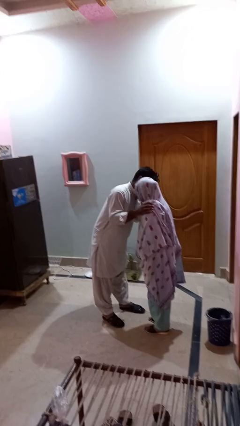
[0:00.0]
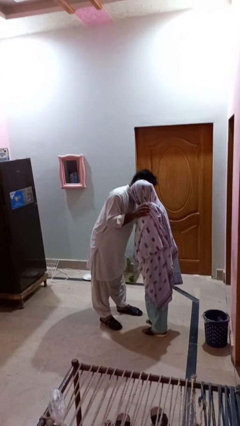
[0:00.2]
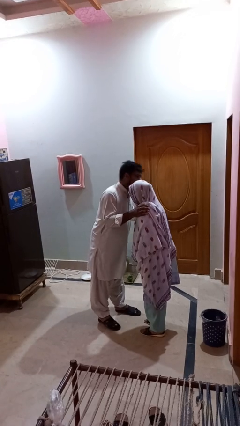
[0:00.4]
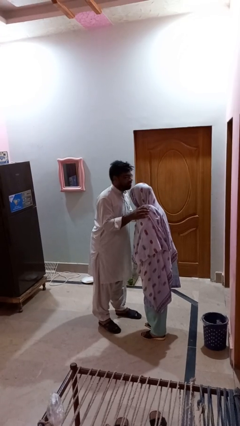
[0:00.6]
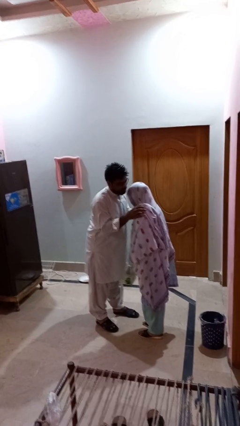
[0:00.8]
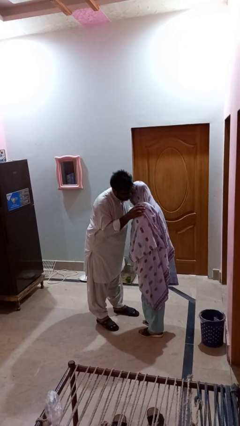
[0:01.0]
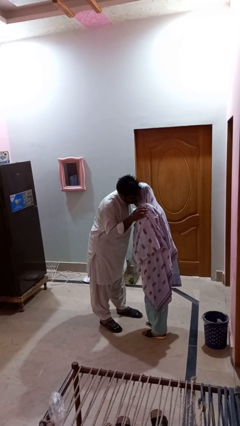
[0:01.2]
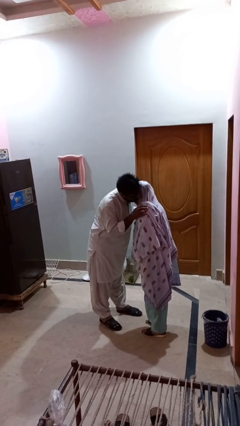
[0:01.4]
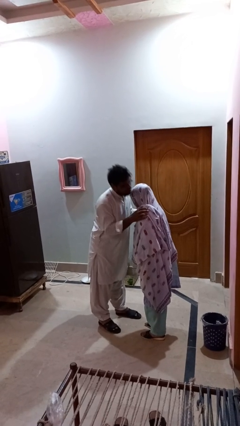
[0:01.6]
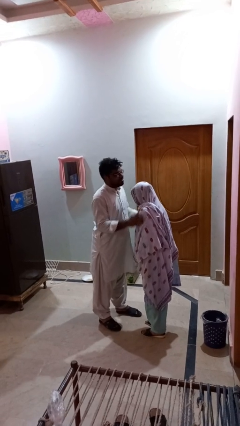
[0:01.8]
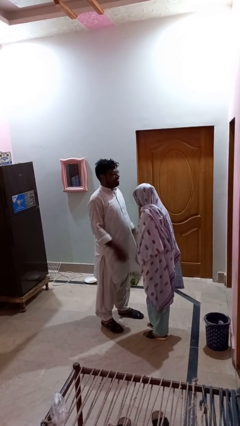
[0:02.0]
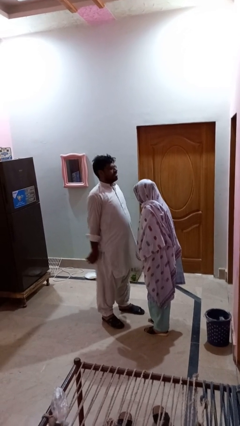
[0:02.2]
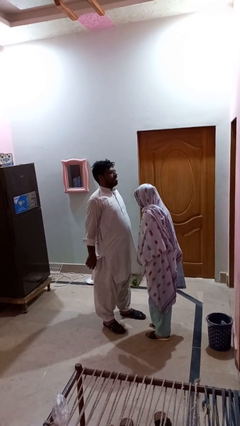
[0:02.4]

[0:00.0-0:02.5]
person kisses cheek of person

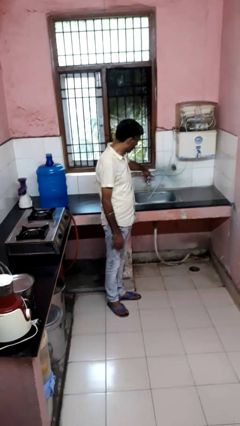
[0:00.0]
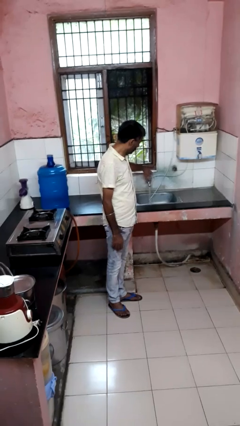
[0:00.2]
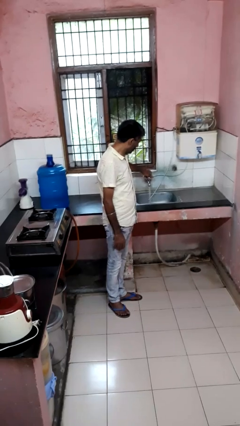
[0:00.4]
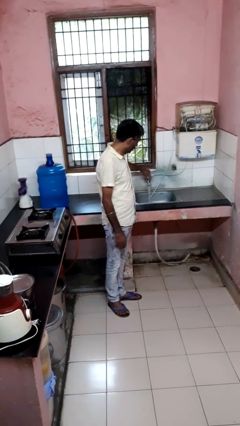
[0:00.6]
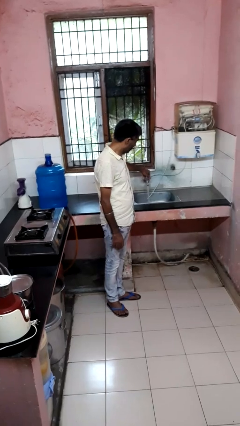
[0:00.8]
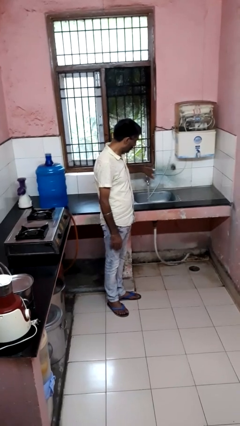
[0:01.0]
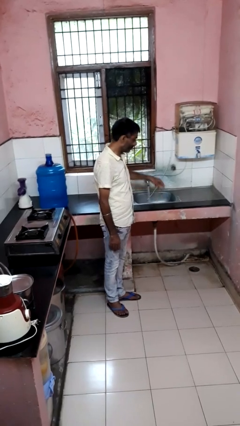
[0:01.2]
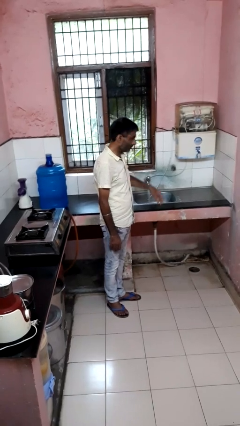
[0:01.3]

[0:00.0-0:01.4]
person turns on faucet

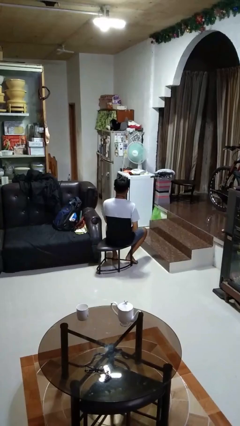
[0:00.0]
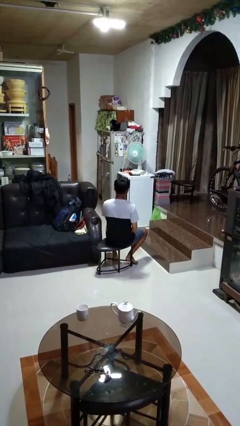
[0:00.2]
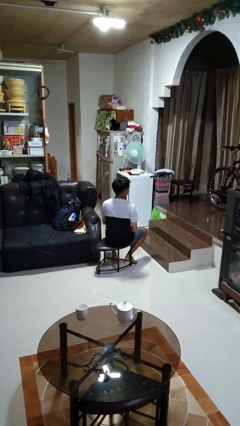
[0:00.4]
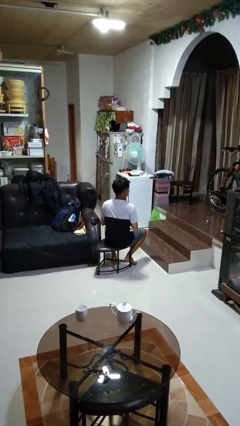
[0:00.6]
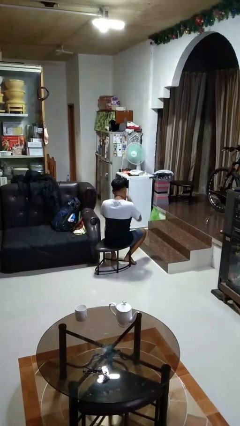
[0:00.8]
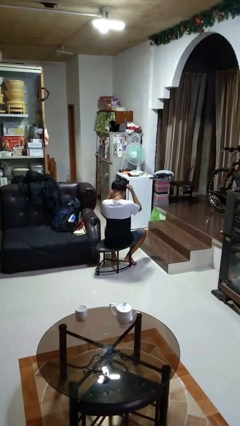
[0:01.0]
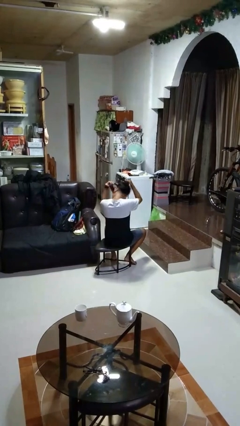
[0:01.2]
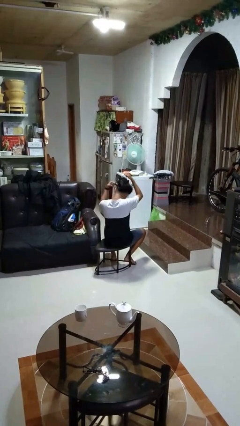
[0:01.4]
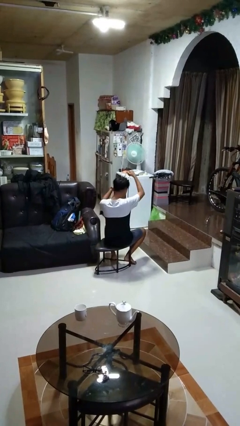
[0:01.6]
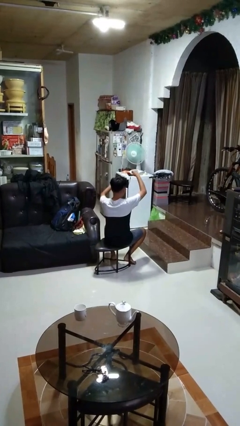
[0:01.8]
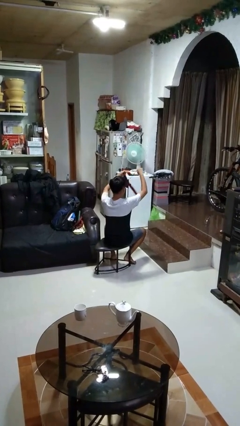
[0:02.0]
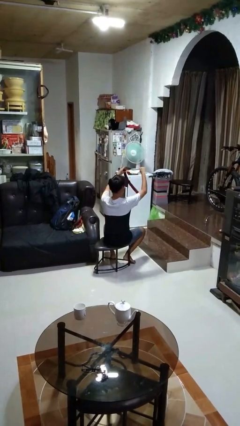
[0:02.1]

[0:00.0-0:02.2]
person takes off necktie

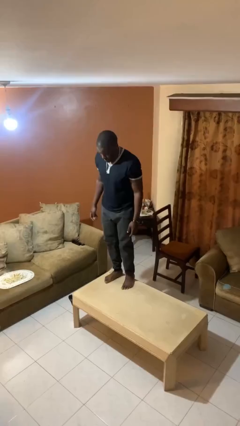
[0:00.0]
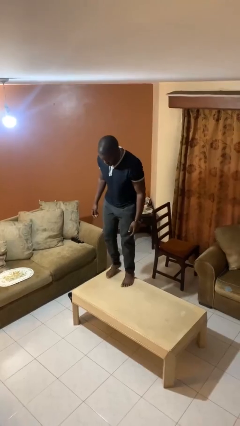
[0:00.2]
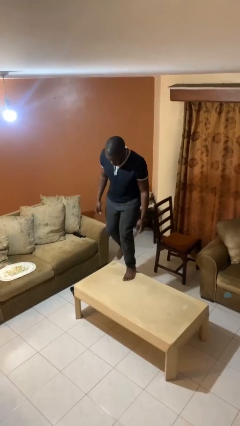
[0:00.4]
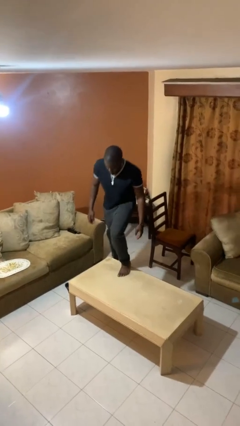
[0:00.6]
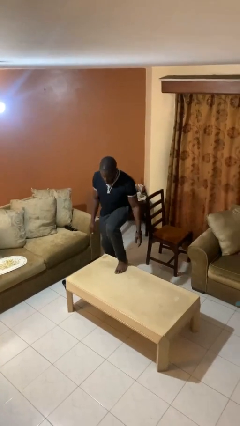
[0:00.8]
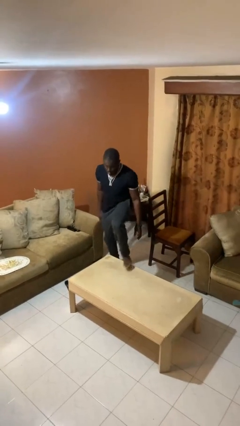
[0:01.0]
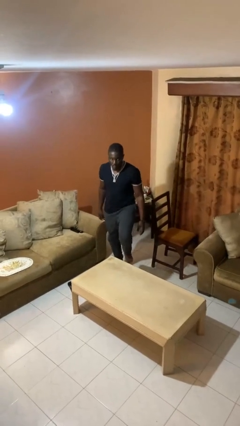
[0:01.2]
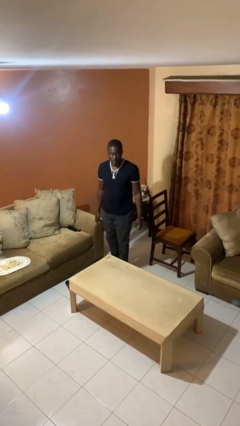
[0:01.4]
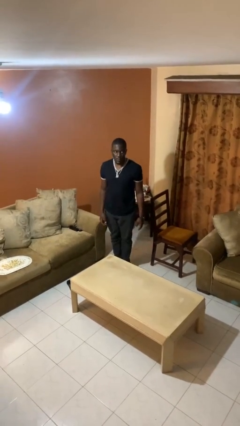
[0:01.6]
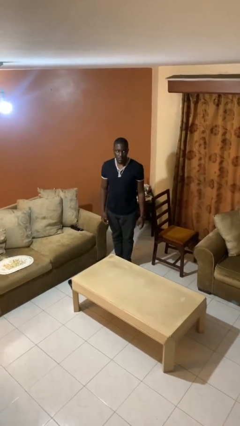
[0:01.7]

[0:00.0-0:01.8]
person climbs off table

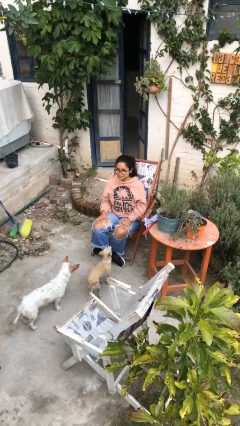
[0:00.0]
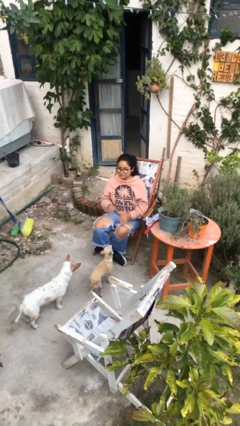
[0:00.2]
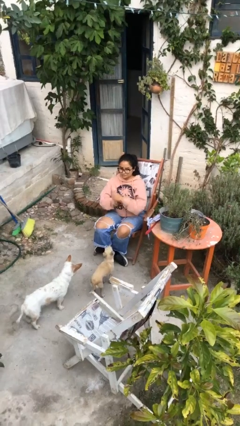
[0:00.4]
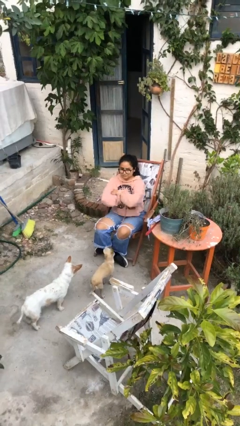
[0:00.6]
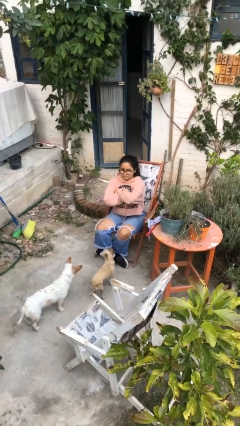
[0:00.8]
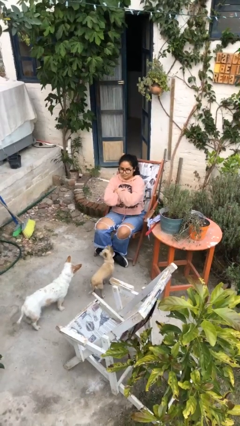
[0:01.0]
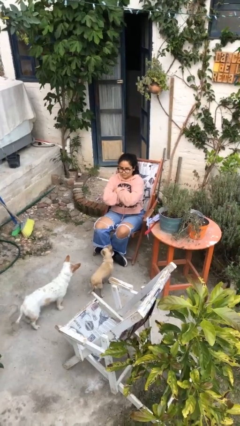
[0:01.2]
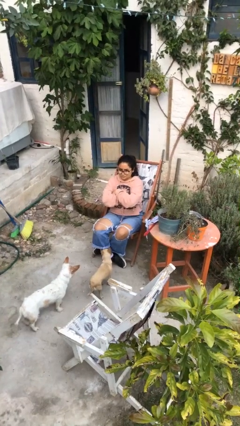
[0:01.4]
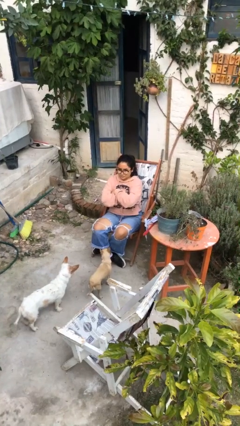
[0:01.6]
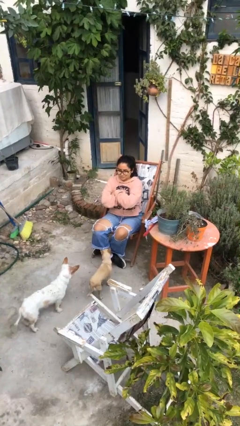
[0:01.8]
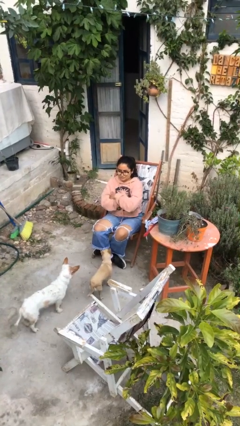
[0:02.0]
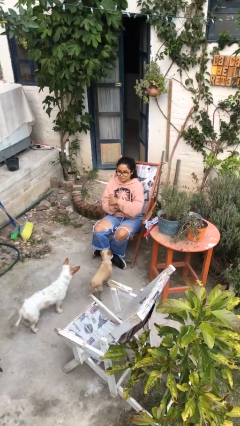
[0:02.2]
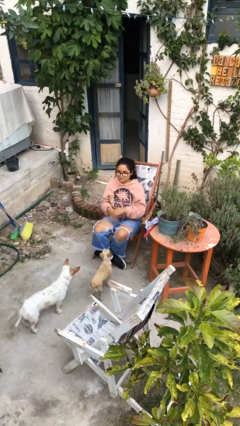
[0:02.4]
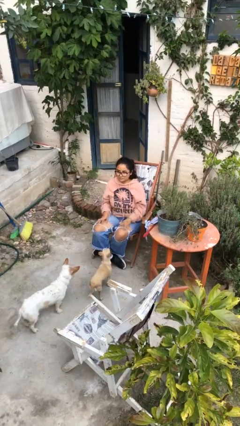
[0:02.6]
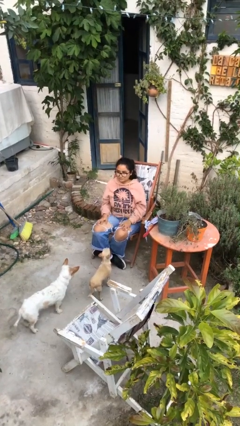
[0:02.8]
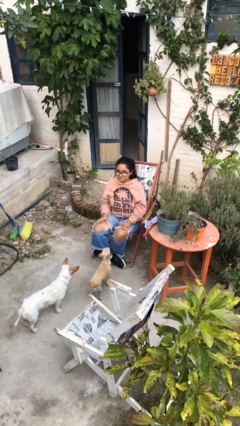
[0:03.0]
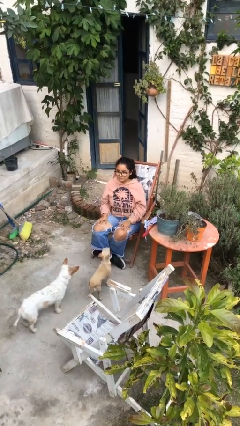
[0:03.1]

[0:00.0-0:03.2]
person crosses arms

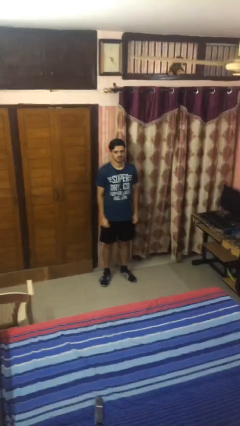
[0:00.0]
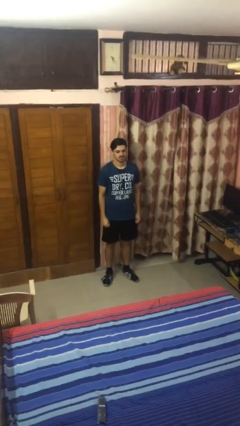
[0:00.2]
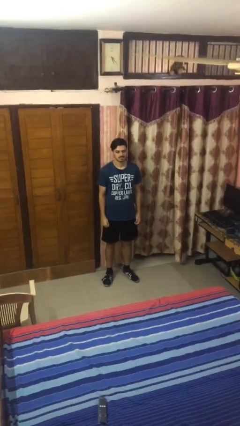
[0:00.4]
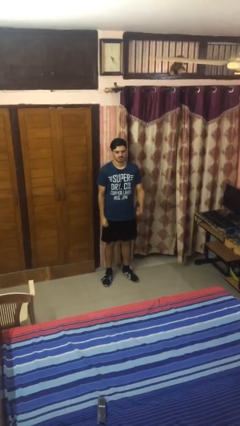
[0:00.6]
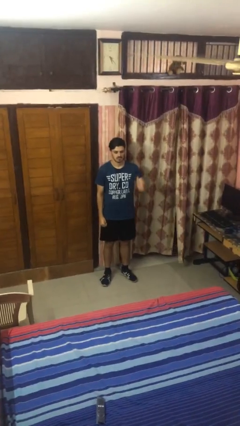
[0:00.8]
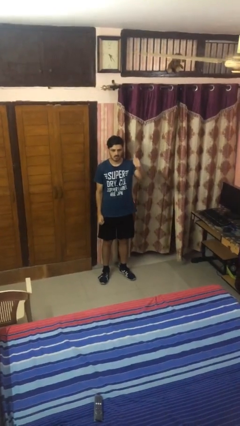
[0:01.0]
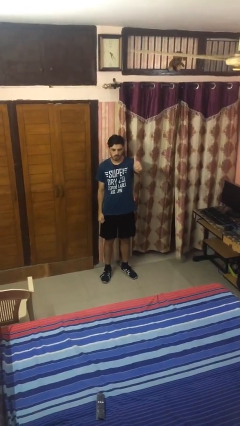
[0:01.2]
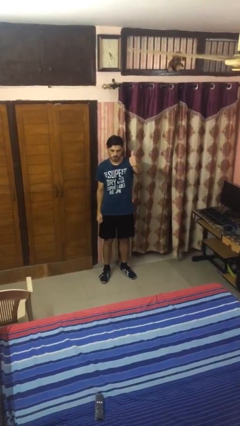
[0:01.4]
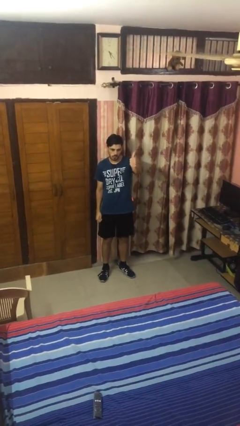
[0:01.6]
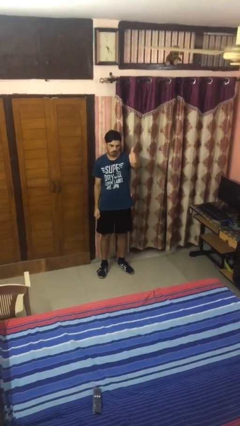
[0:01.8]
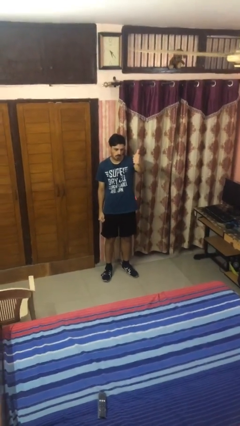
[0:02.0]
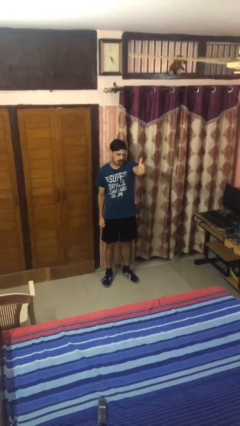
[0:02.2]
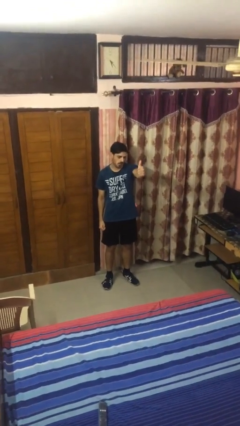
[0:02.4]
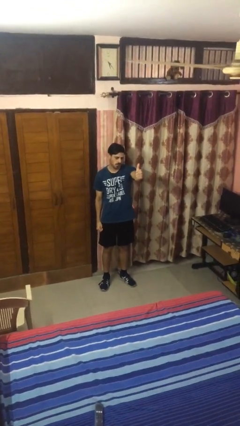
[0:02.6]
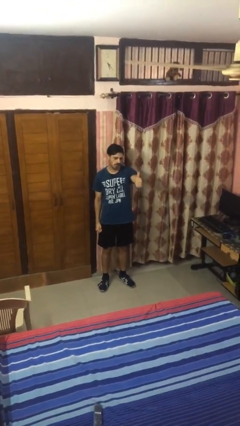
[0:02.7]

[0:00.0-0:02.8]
person gestures thumbs up

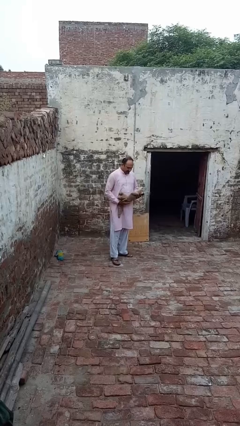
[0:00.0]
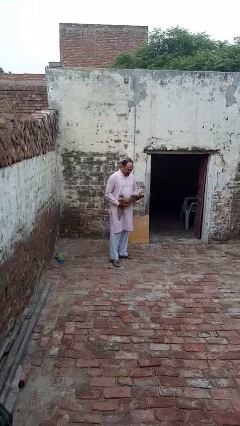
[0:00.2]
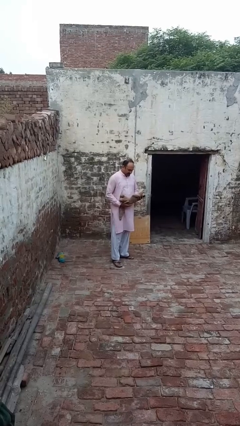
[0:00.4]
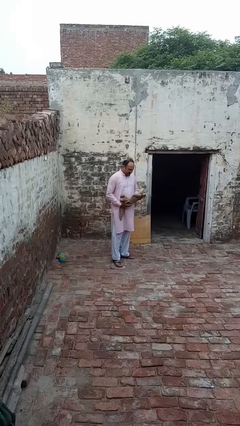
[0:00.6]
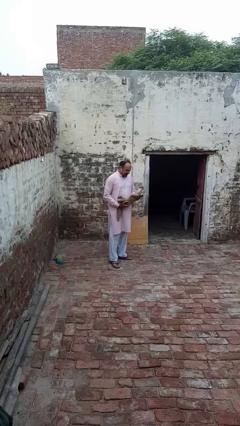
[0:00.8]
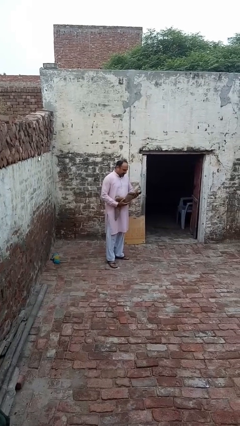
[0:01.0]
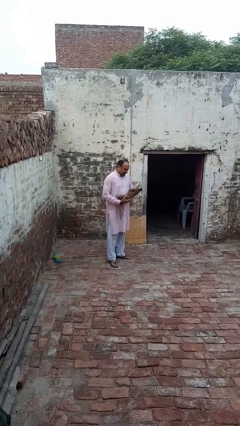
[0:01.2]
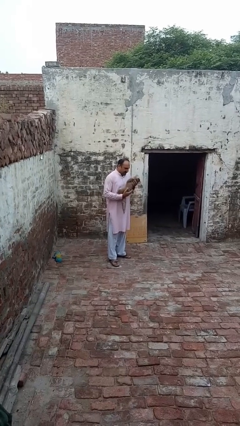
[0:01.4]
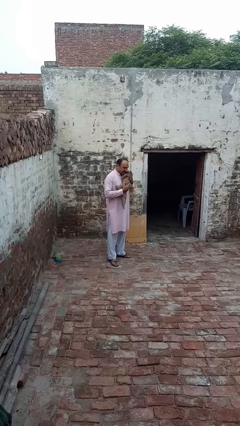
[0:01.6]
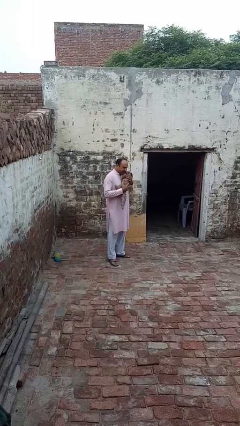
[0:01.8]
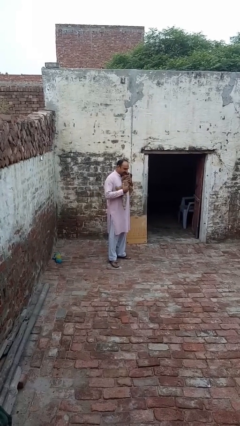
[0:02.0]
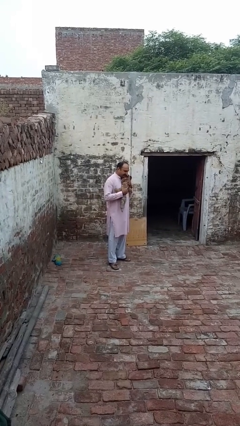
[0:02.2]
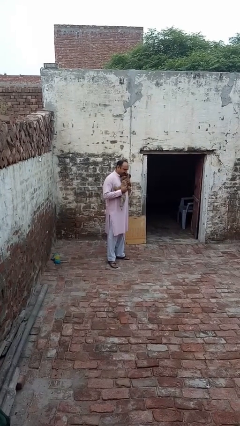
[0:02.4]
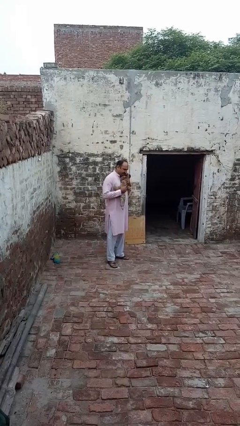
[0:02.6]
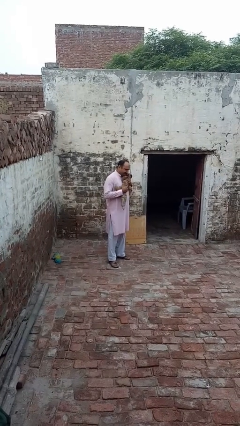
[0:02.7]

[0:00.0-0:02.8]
person hugs stuffed animal

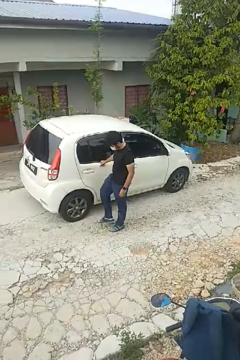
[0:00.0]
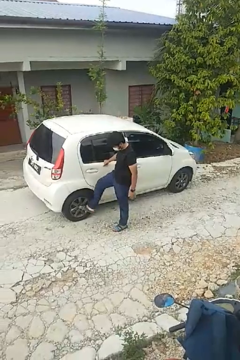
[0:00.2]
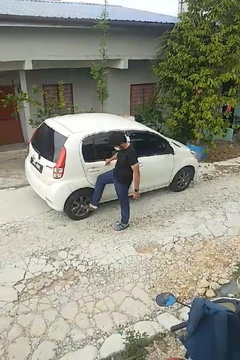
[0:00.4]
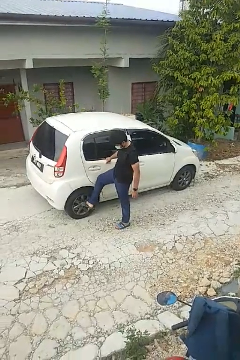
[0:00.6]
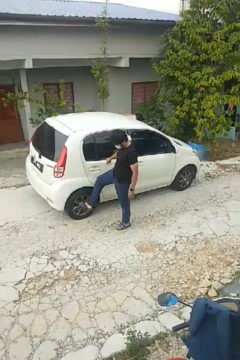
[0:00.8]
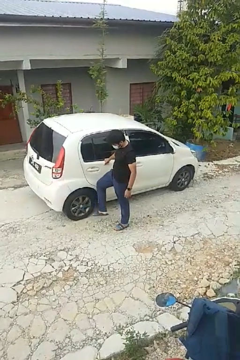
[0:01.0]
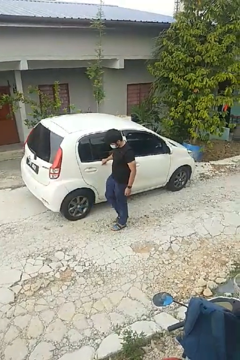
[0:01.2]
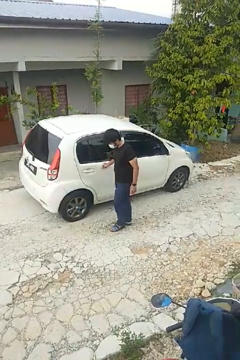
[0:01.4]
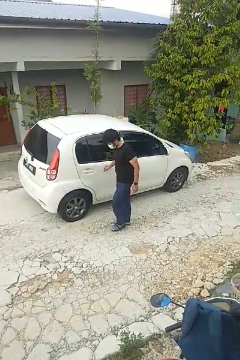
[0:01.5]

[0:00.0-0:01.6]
person kicks car tires
